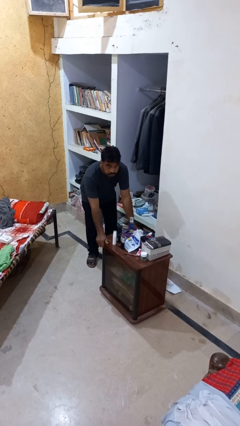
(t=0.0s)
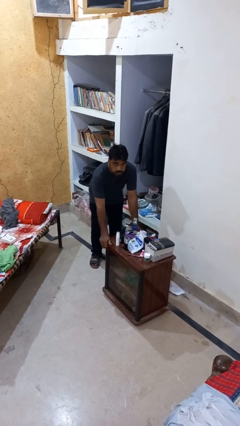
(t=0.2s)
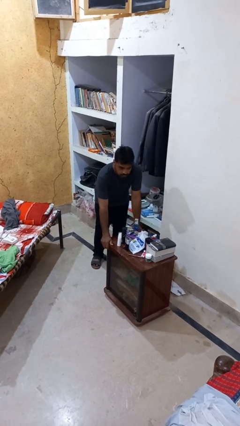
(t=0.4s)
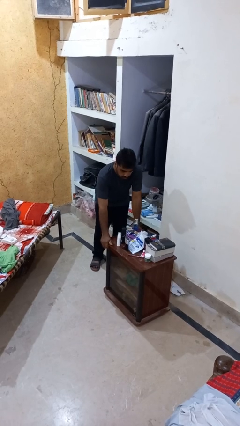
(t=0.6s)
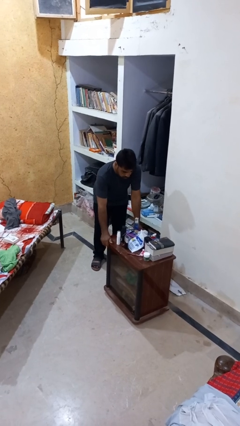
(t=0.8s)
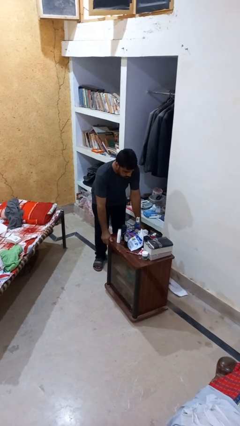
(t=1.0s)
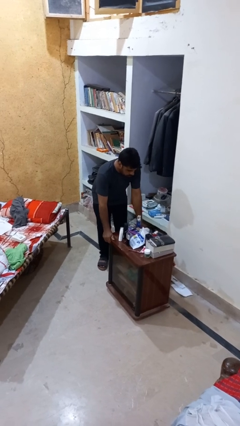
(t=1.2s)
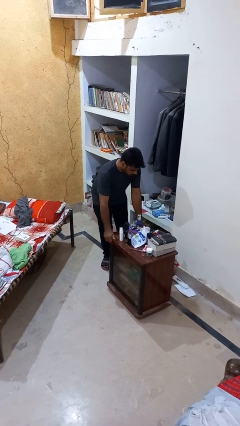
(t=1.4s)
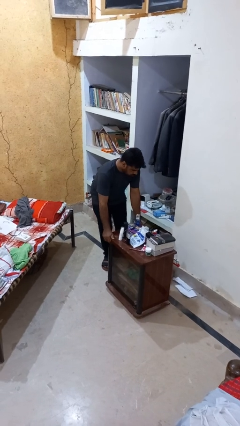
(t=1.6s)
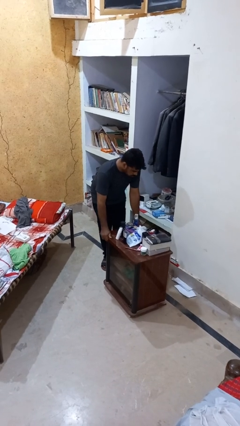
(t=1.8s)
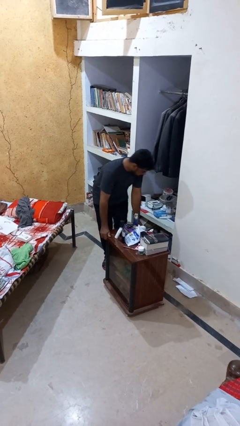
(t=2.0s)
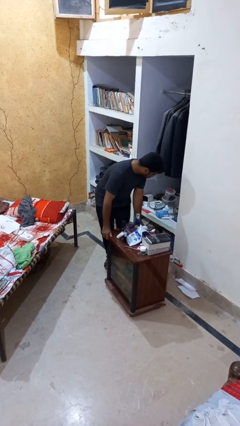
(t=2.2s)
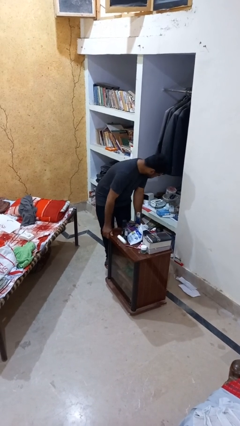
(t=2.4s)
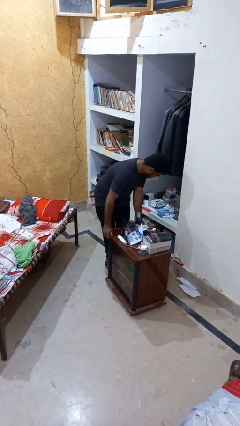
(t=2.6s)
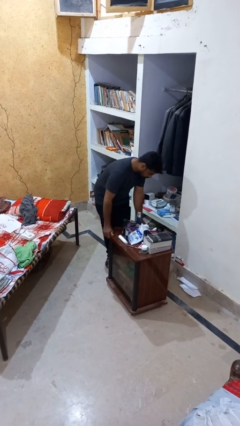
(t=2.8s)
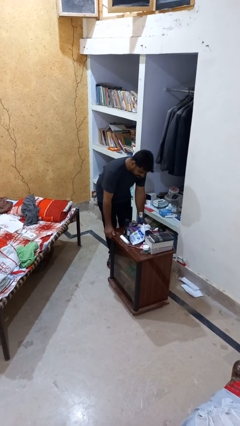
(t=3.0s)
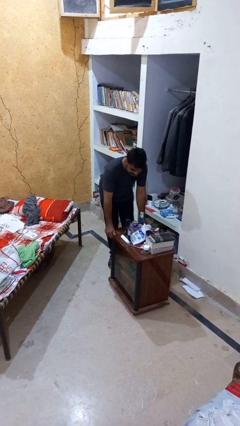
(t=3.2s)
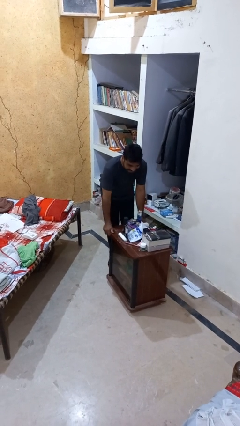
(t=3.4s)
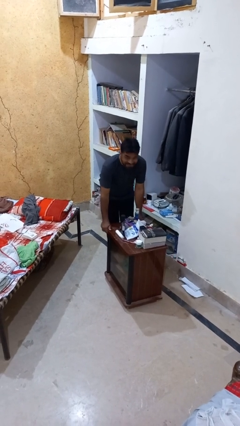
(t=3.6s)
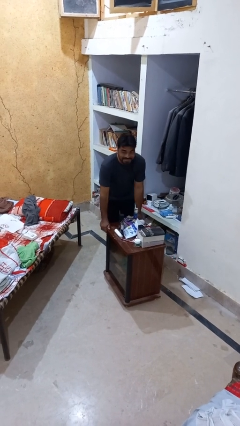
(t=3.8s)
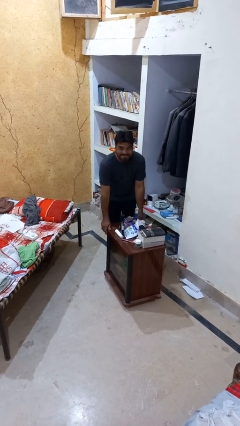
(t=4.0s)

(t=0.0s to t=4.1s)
person pulls wheeled cart

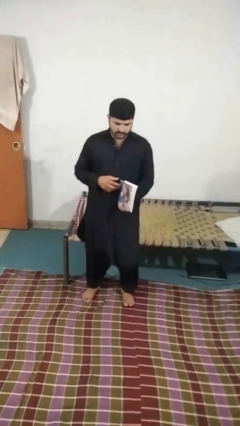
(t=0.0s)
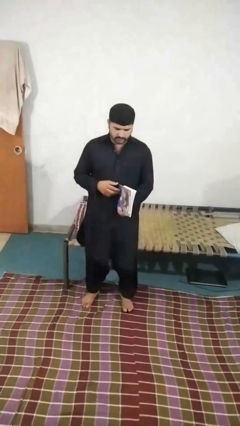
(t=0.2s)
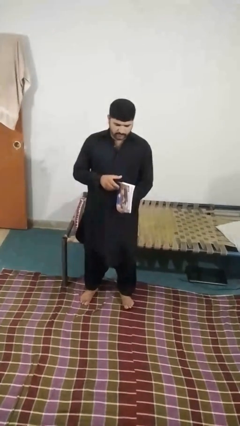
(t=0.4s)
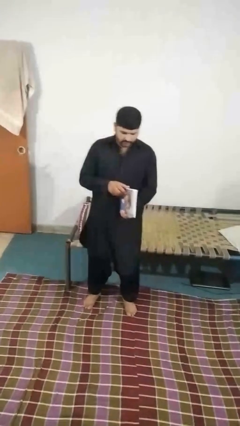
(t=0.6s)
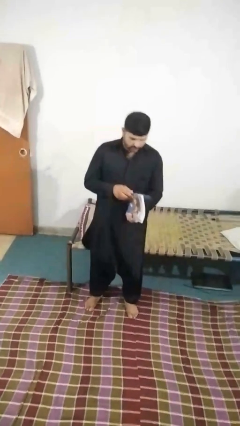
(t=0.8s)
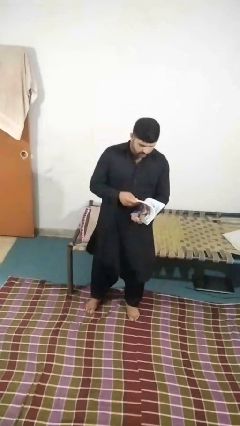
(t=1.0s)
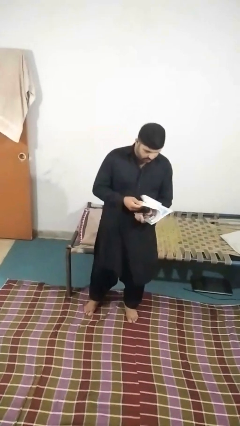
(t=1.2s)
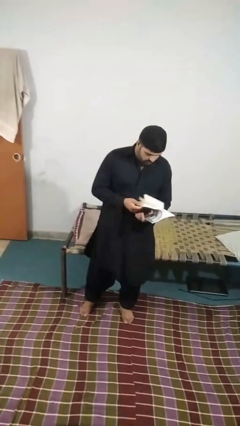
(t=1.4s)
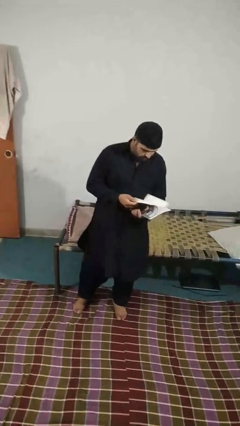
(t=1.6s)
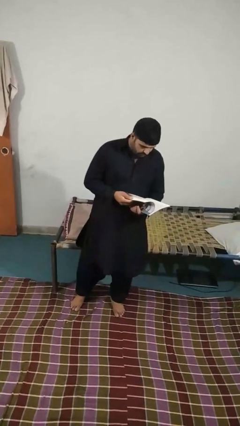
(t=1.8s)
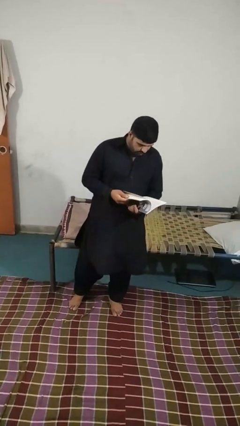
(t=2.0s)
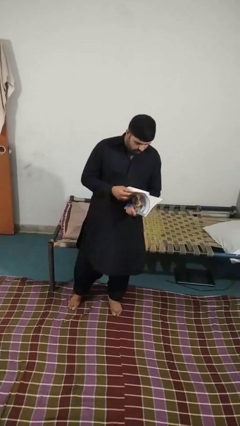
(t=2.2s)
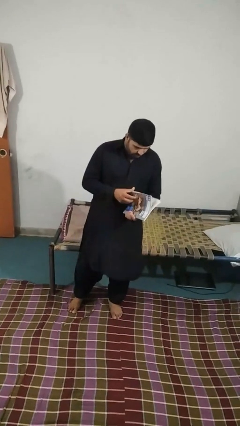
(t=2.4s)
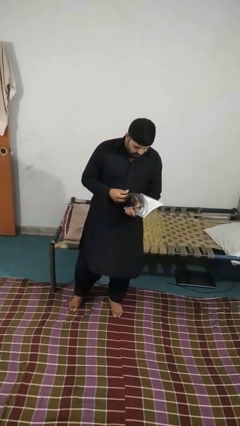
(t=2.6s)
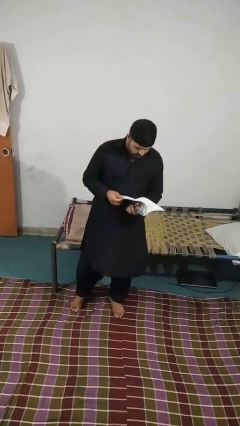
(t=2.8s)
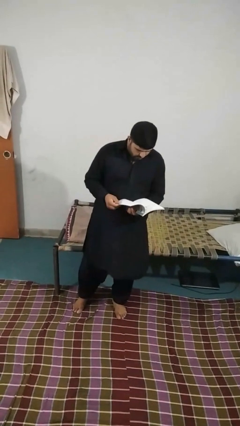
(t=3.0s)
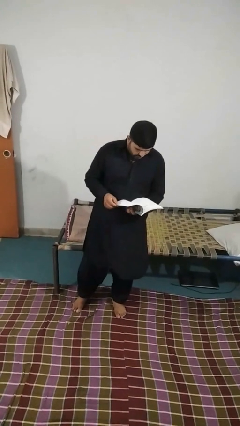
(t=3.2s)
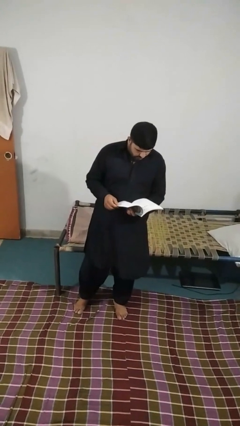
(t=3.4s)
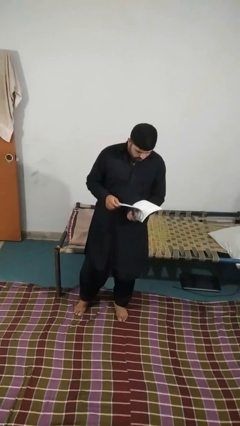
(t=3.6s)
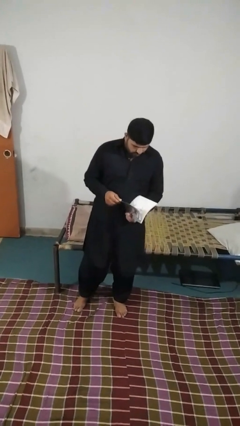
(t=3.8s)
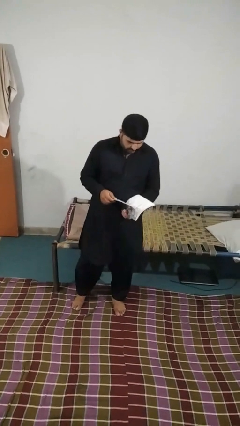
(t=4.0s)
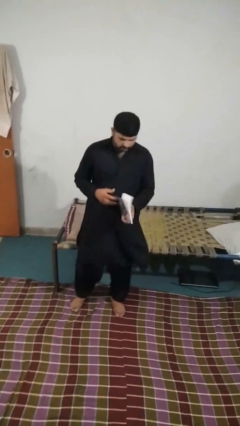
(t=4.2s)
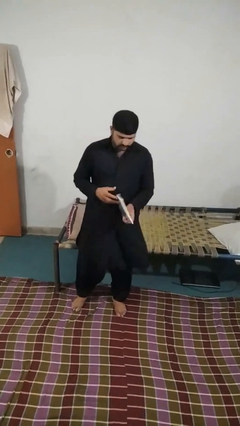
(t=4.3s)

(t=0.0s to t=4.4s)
person reads magazine

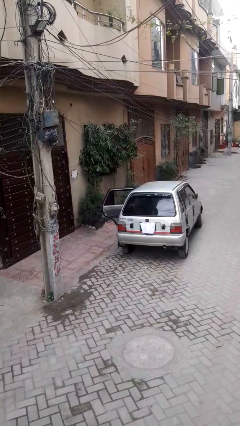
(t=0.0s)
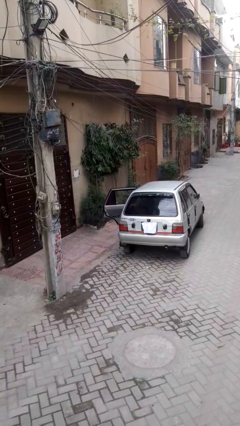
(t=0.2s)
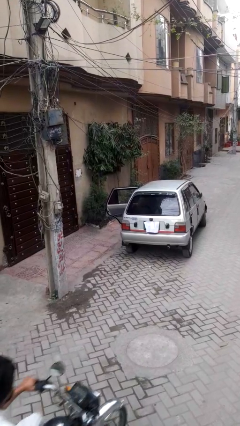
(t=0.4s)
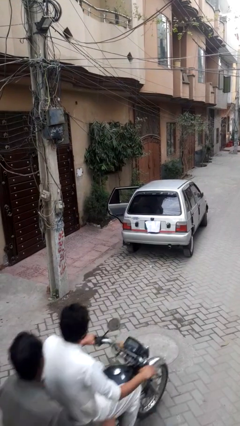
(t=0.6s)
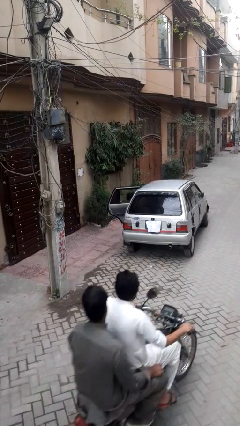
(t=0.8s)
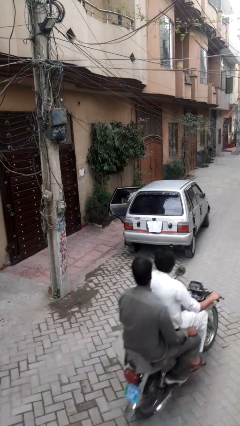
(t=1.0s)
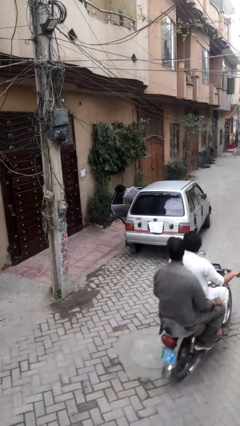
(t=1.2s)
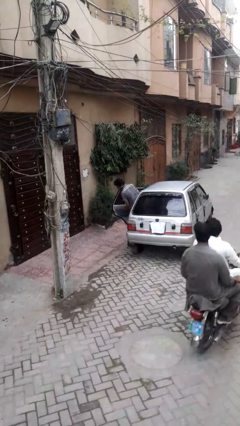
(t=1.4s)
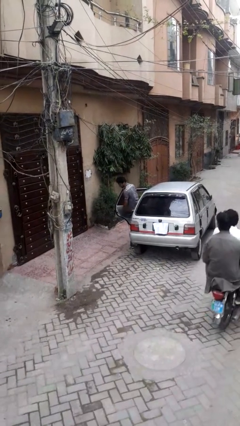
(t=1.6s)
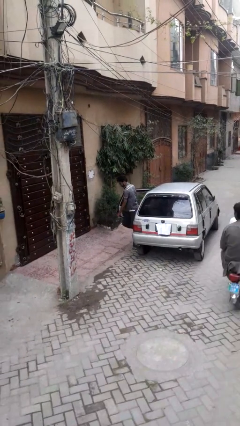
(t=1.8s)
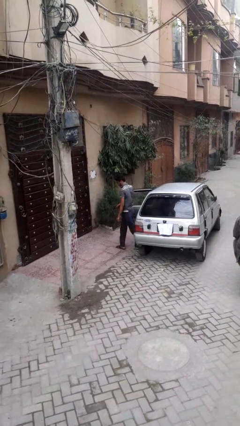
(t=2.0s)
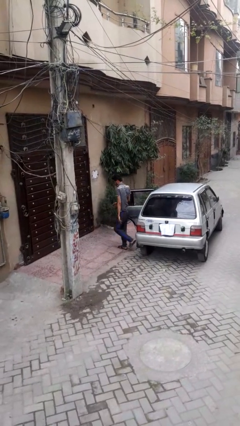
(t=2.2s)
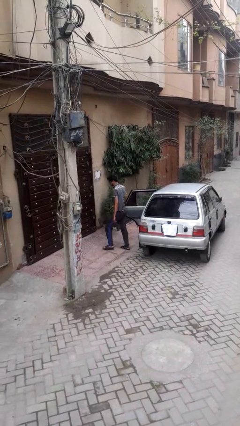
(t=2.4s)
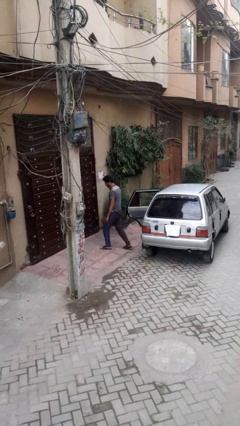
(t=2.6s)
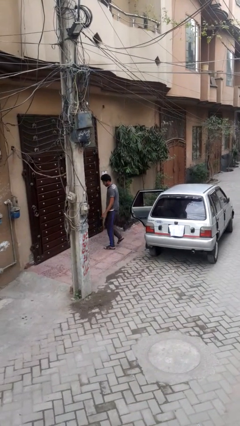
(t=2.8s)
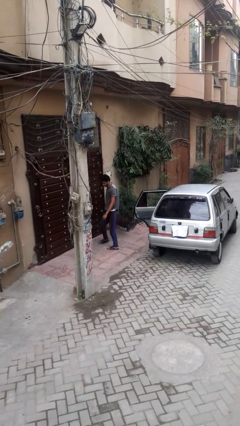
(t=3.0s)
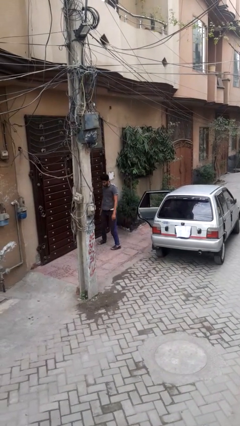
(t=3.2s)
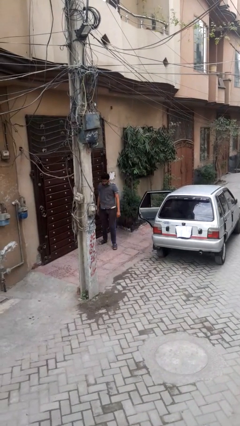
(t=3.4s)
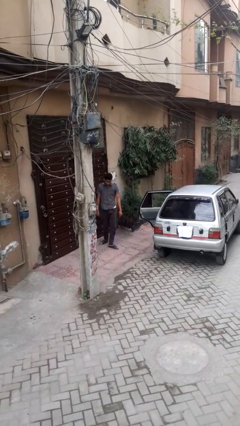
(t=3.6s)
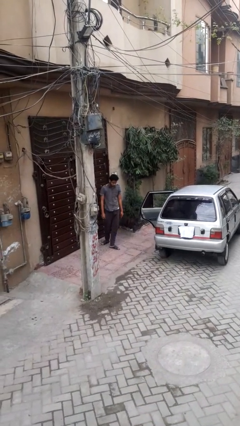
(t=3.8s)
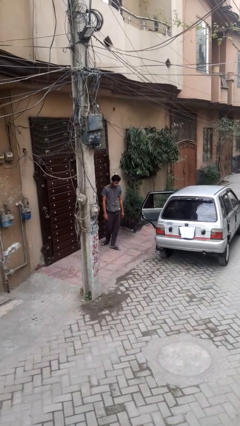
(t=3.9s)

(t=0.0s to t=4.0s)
person exits car

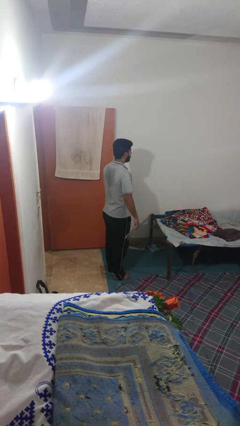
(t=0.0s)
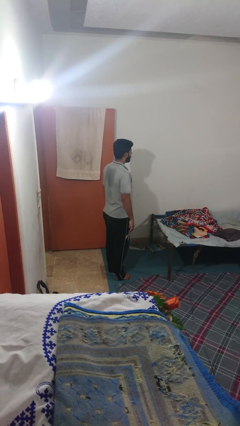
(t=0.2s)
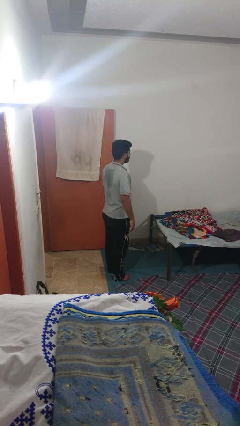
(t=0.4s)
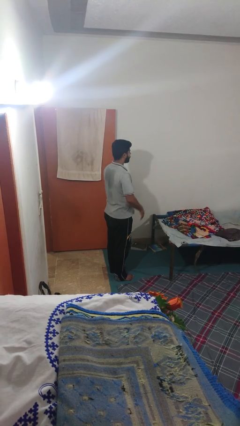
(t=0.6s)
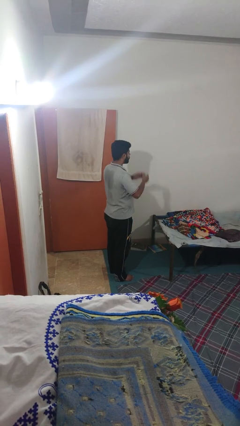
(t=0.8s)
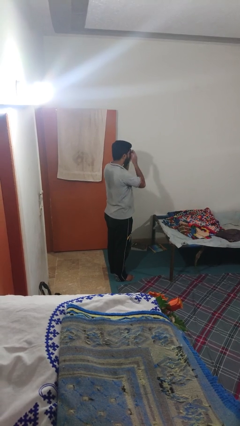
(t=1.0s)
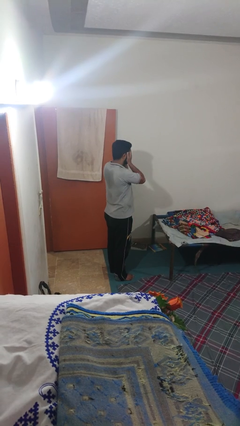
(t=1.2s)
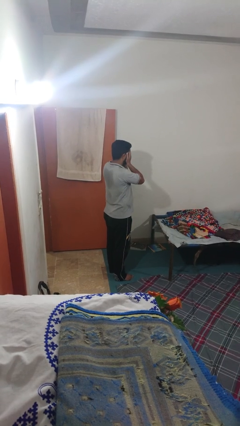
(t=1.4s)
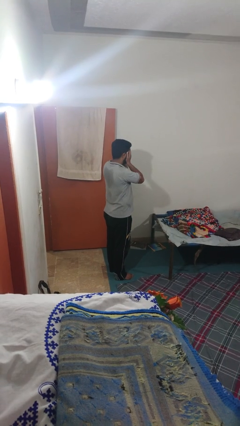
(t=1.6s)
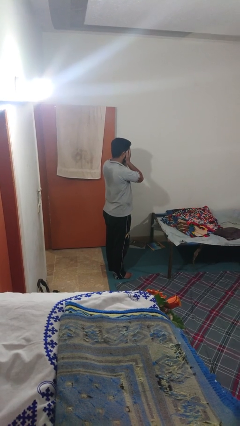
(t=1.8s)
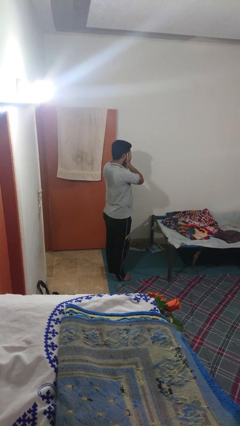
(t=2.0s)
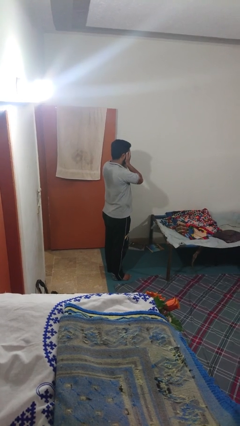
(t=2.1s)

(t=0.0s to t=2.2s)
person covers face with hands

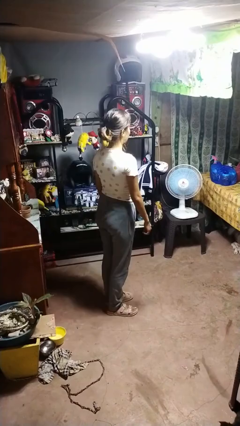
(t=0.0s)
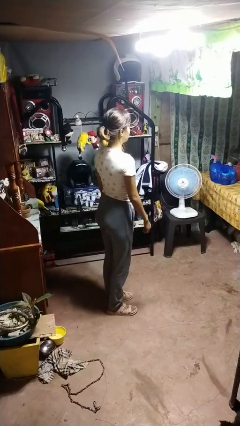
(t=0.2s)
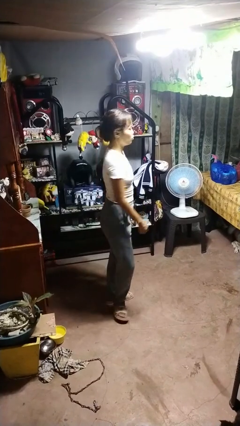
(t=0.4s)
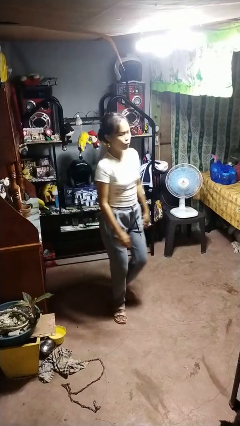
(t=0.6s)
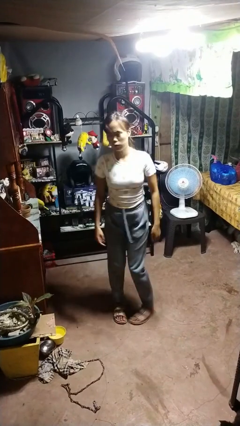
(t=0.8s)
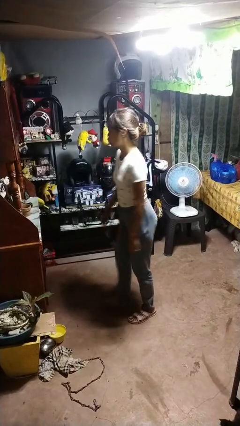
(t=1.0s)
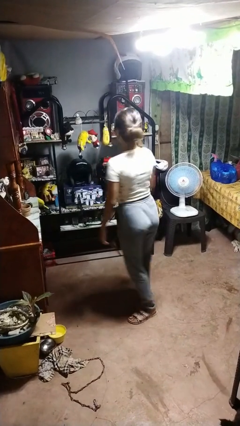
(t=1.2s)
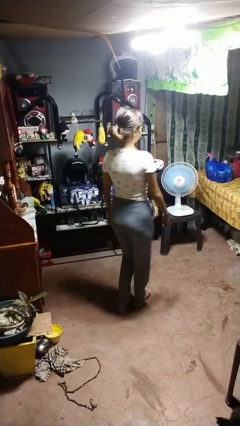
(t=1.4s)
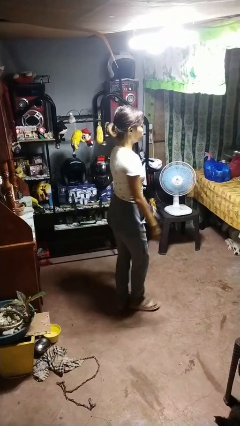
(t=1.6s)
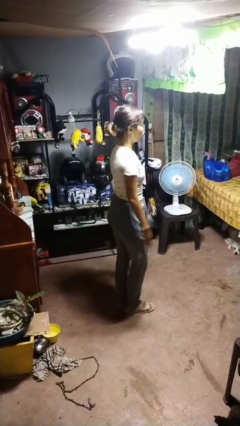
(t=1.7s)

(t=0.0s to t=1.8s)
person twirls

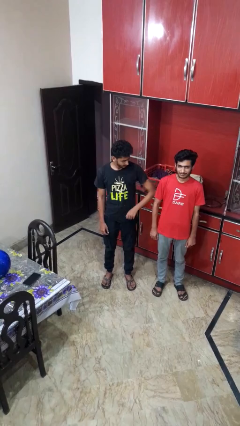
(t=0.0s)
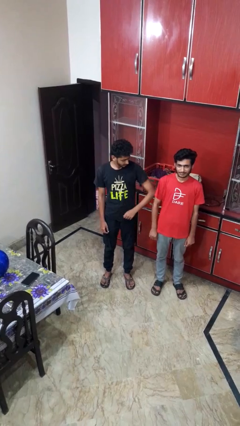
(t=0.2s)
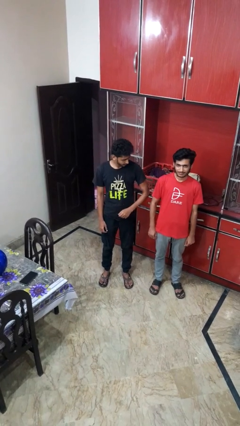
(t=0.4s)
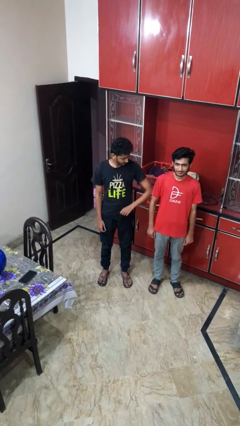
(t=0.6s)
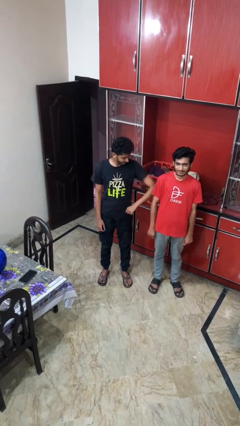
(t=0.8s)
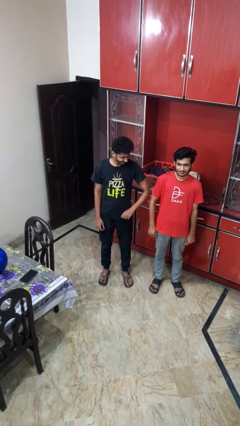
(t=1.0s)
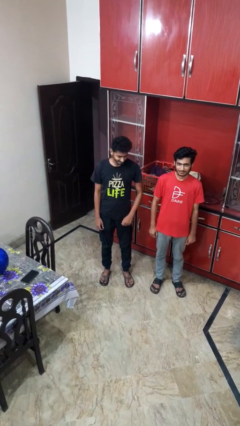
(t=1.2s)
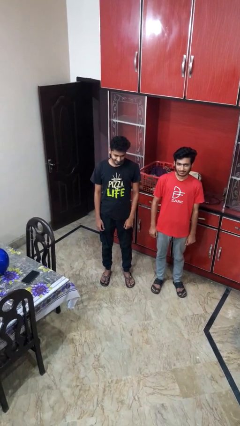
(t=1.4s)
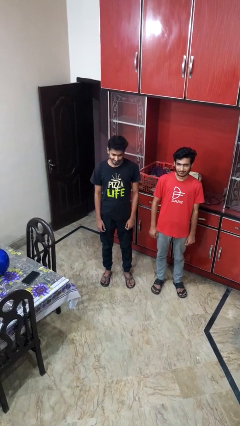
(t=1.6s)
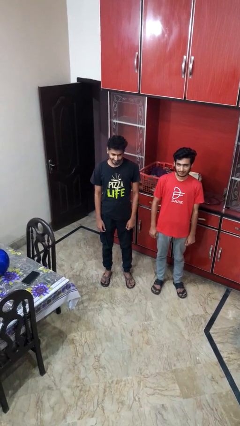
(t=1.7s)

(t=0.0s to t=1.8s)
person nudges person with elbow
